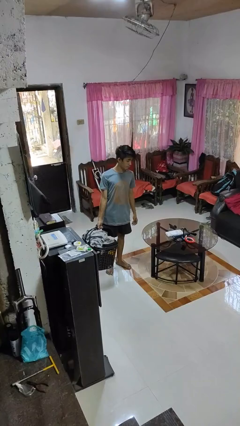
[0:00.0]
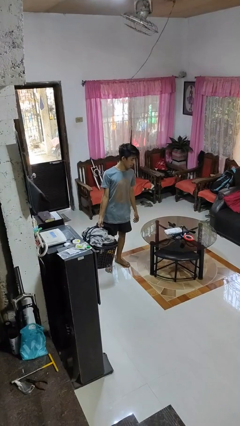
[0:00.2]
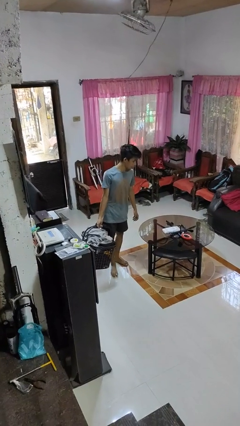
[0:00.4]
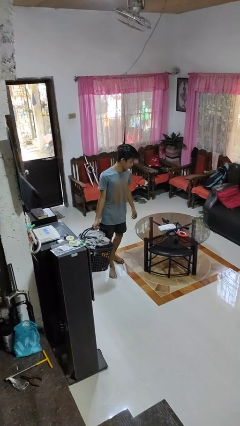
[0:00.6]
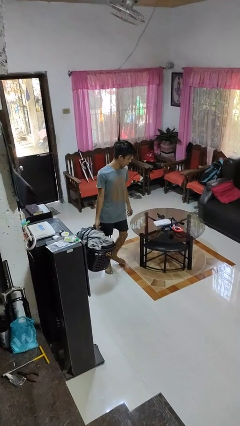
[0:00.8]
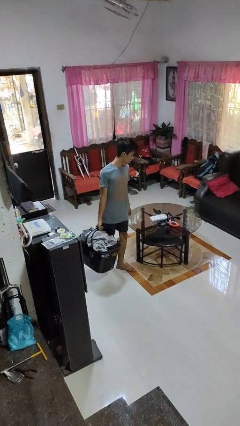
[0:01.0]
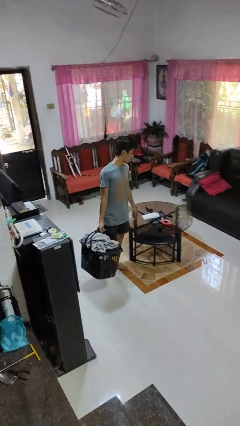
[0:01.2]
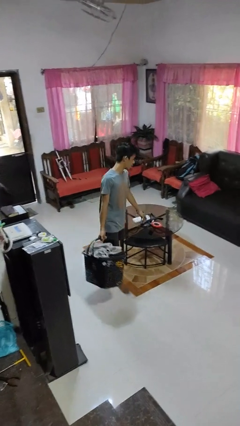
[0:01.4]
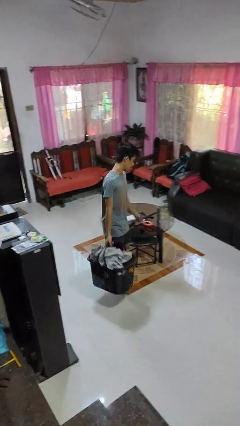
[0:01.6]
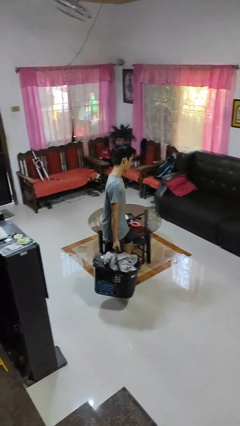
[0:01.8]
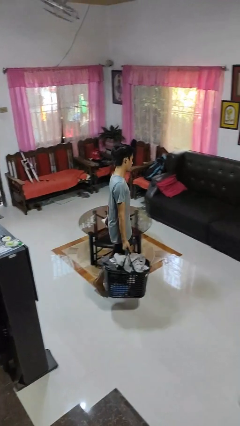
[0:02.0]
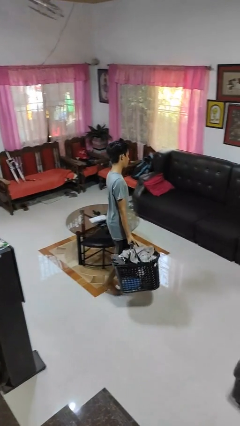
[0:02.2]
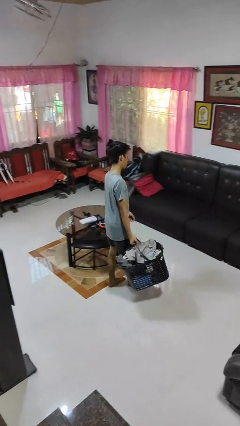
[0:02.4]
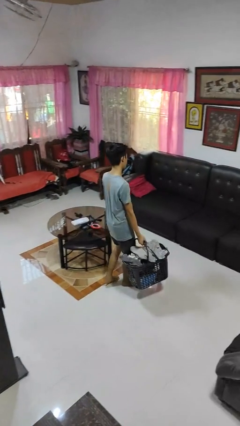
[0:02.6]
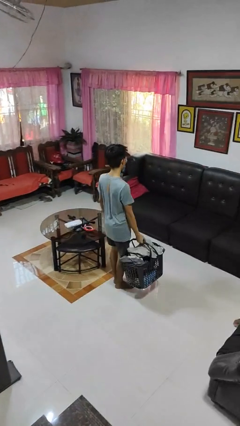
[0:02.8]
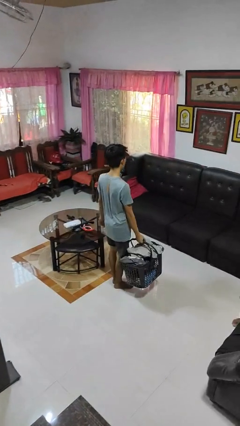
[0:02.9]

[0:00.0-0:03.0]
person carries laundry basket

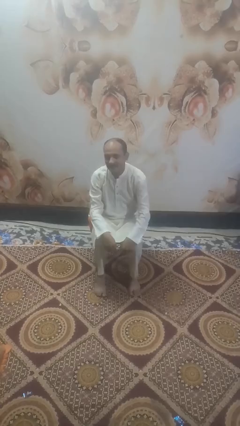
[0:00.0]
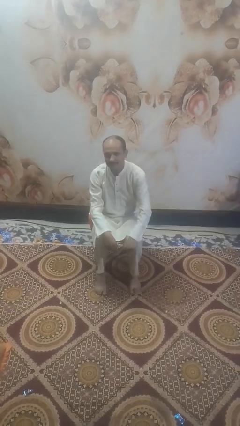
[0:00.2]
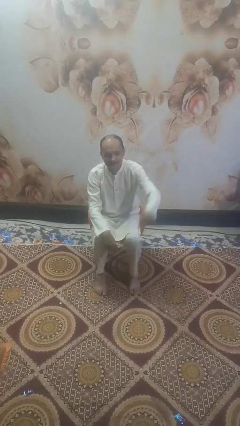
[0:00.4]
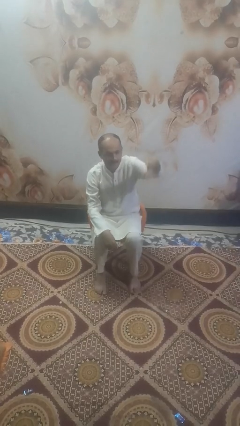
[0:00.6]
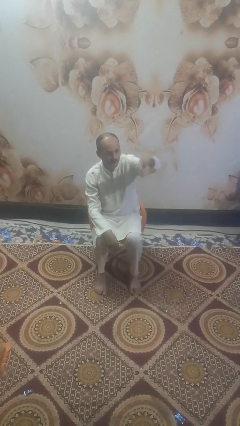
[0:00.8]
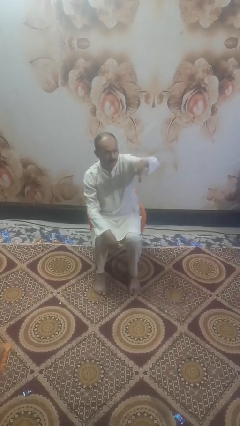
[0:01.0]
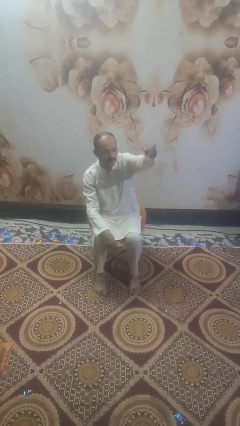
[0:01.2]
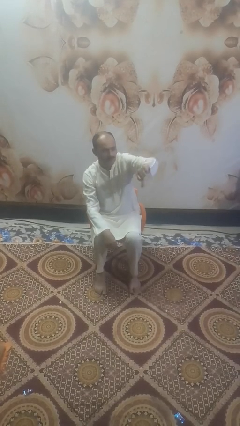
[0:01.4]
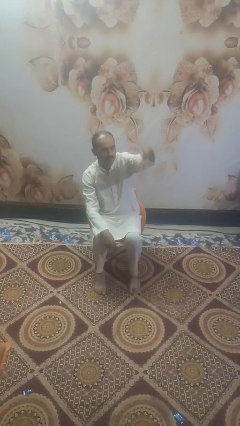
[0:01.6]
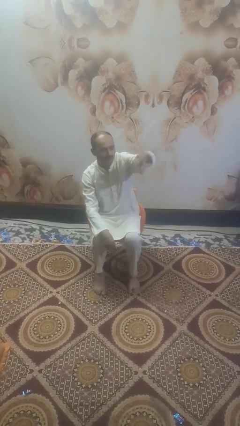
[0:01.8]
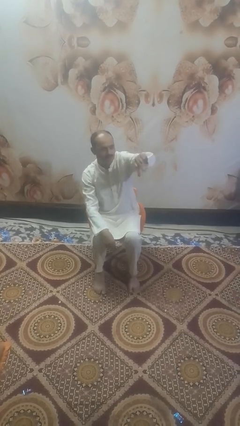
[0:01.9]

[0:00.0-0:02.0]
person gestures thumbs down

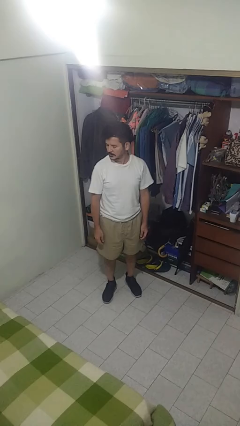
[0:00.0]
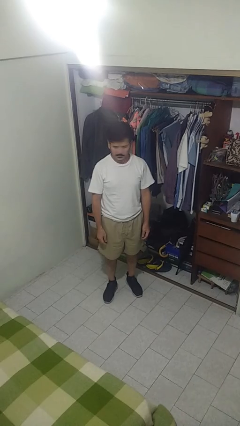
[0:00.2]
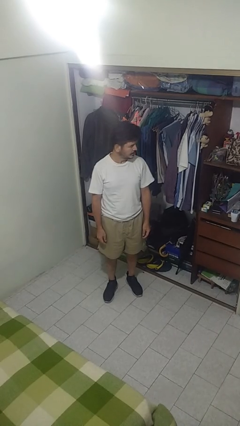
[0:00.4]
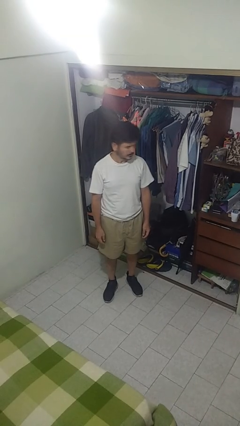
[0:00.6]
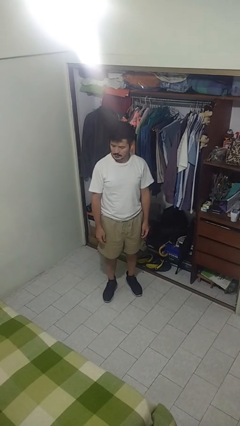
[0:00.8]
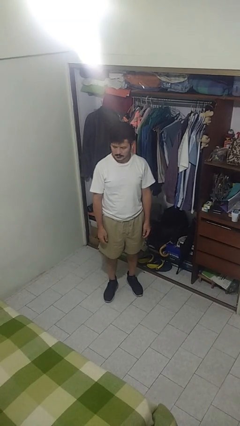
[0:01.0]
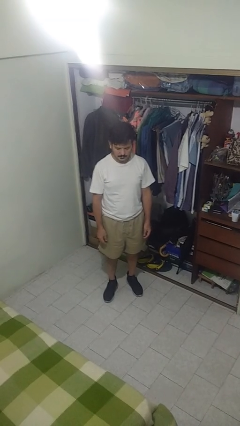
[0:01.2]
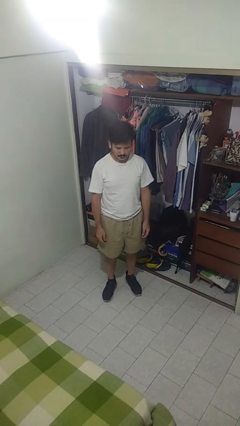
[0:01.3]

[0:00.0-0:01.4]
person shakes head

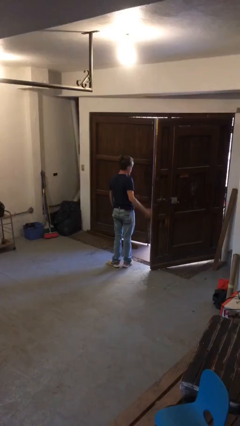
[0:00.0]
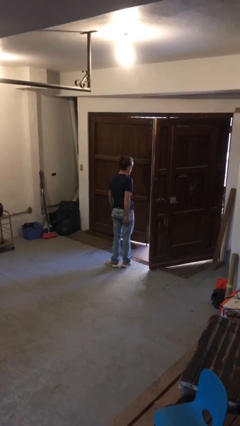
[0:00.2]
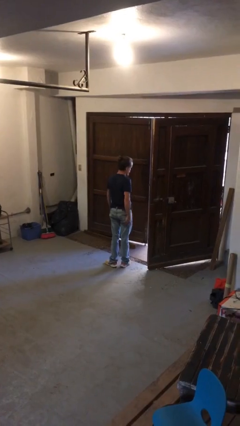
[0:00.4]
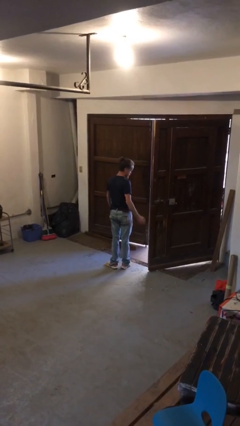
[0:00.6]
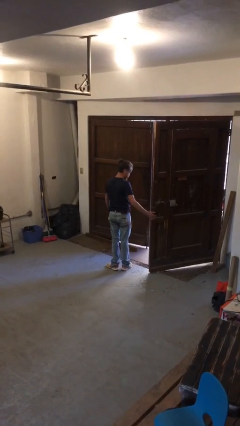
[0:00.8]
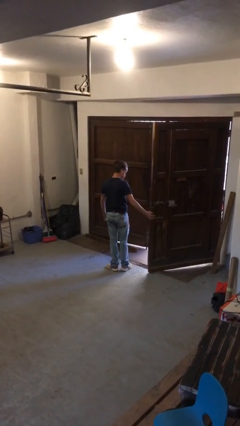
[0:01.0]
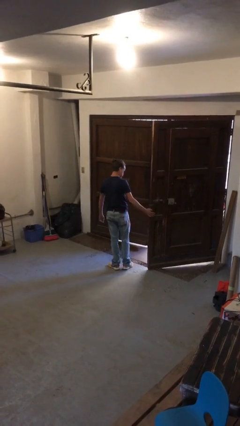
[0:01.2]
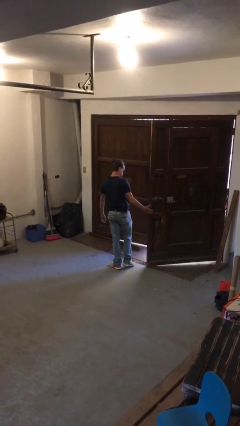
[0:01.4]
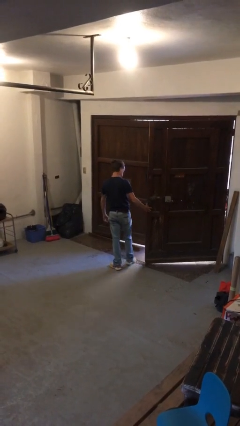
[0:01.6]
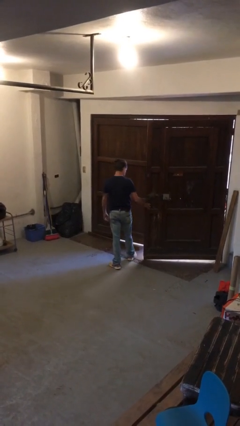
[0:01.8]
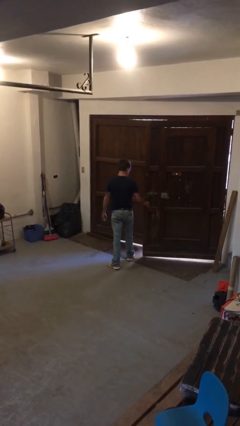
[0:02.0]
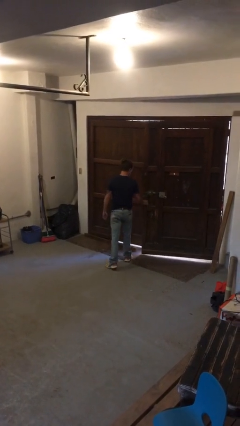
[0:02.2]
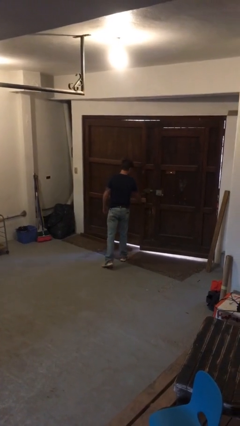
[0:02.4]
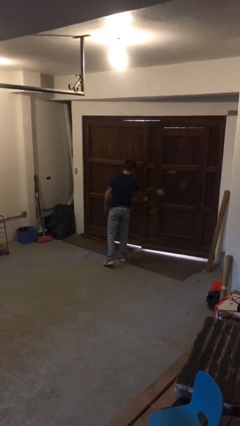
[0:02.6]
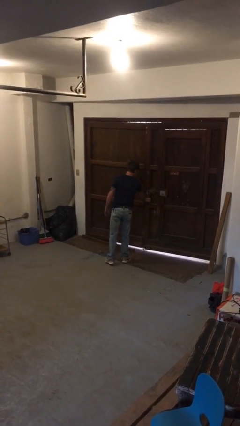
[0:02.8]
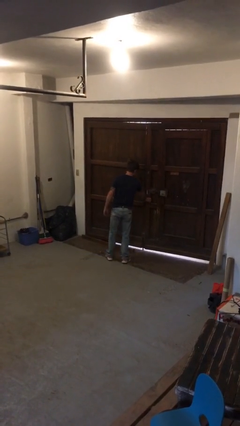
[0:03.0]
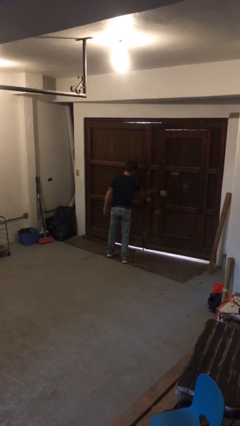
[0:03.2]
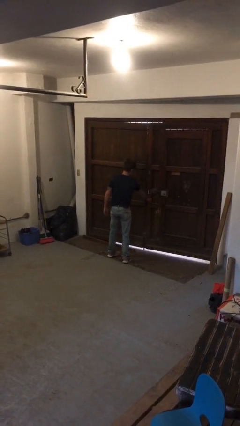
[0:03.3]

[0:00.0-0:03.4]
person closes gate

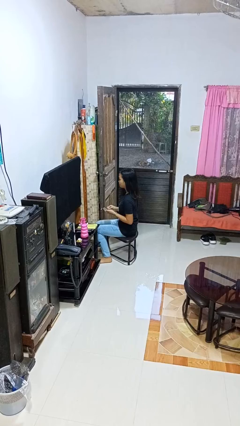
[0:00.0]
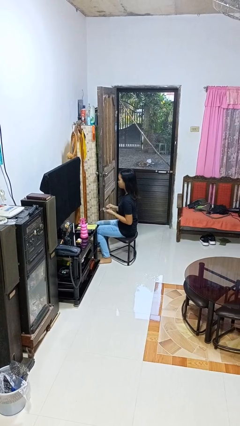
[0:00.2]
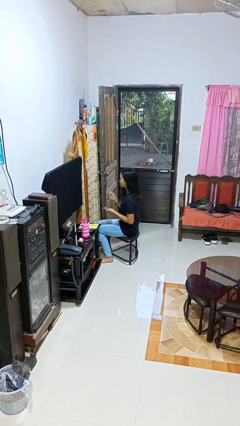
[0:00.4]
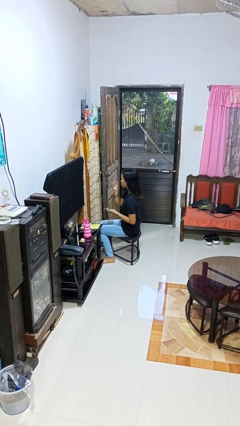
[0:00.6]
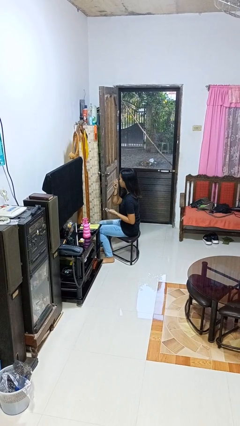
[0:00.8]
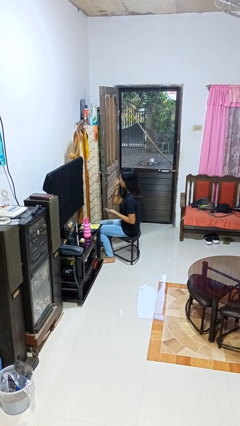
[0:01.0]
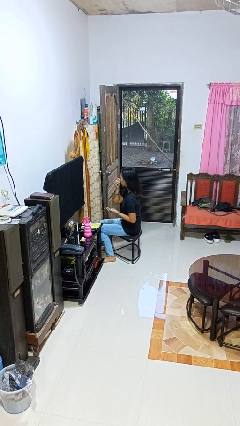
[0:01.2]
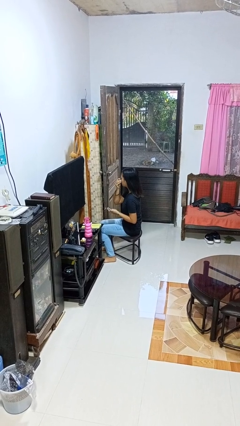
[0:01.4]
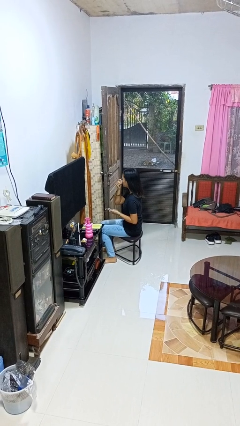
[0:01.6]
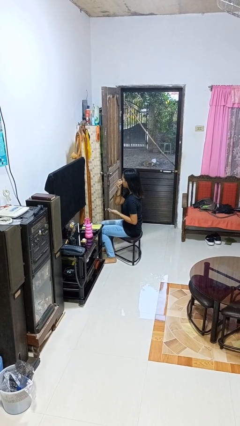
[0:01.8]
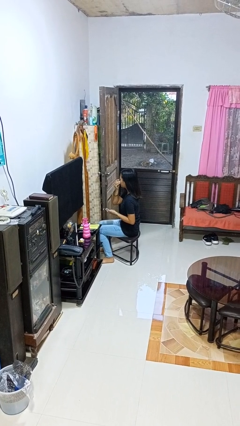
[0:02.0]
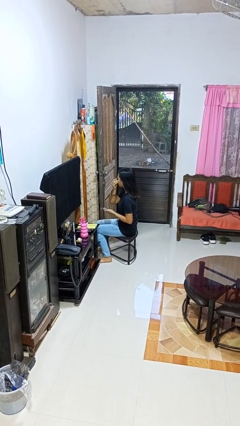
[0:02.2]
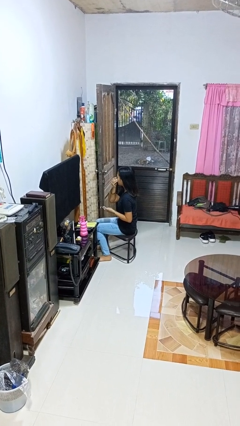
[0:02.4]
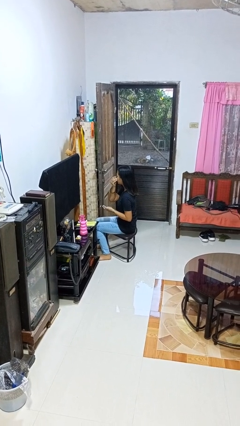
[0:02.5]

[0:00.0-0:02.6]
person applies eye makeup

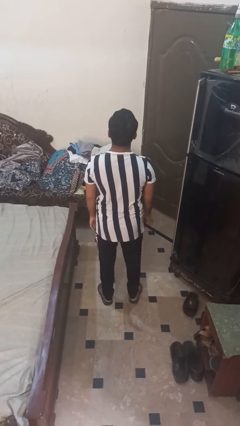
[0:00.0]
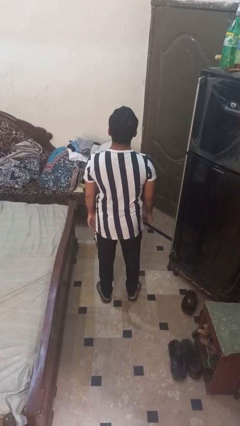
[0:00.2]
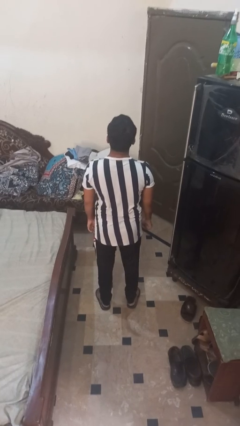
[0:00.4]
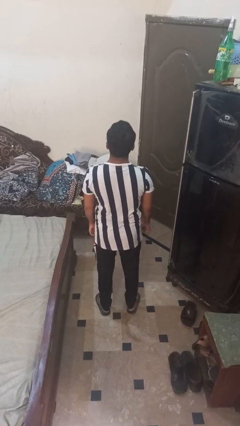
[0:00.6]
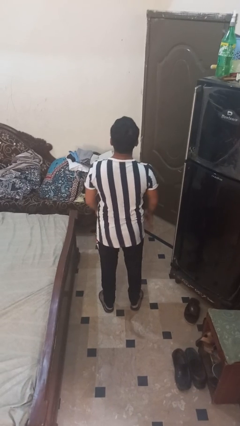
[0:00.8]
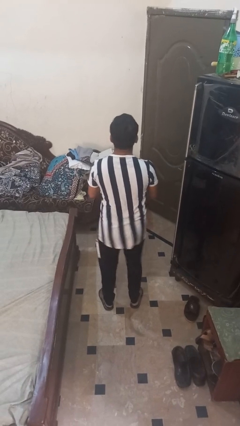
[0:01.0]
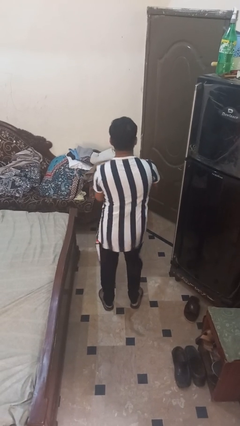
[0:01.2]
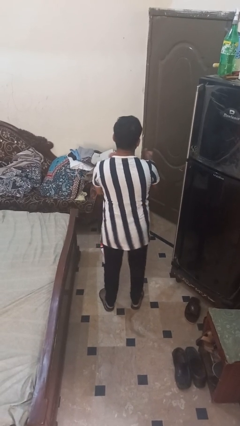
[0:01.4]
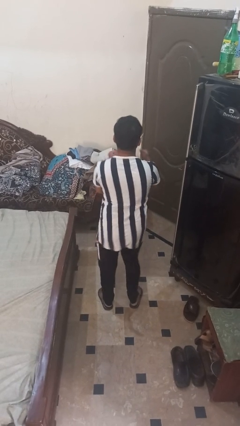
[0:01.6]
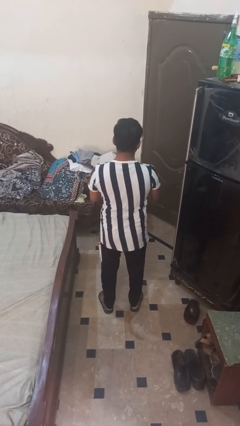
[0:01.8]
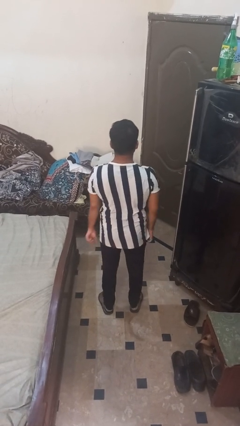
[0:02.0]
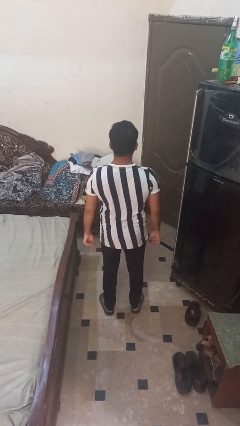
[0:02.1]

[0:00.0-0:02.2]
person wiggles hips

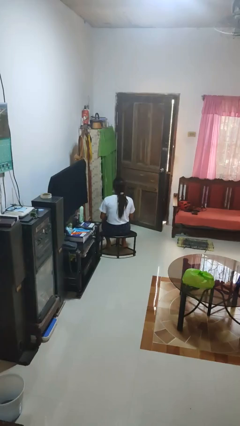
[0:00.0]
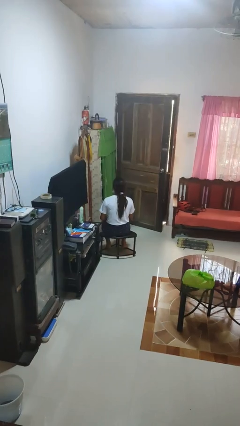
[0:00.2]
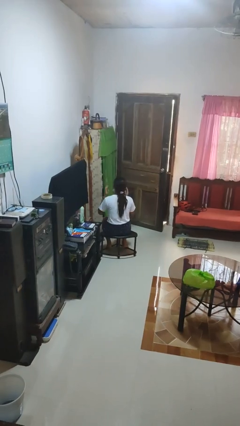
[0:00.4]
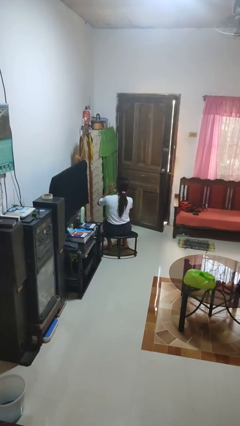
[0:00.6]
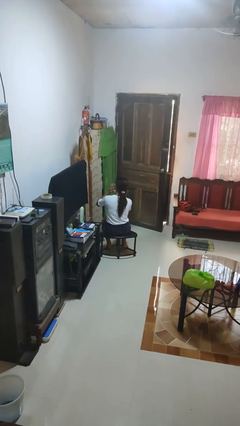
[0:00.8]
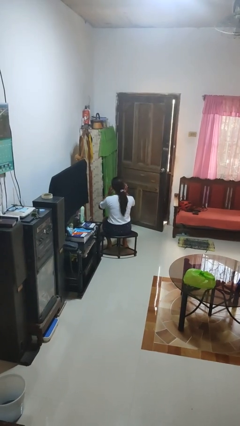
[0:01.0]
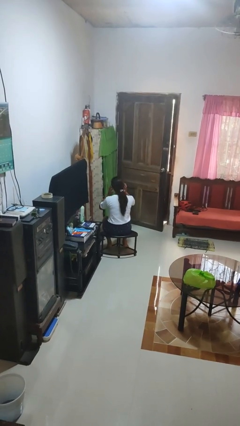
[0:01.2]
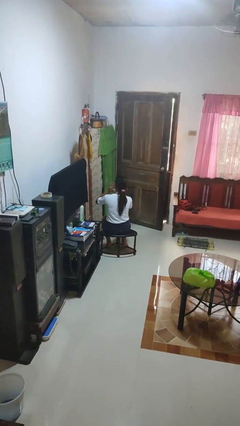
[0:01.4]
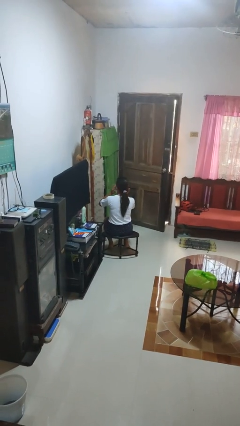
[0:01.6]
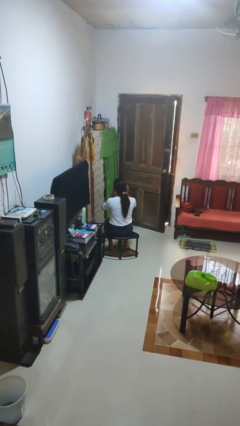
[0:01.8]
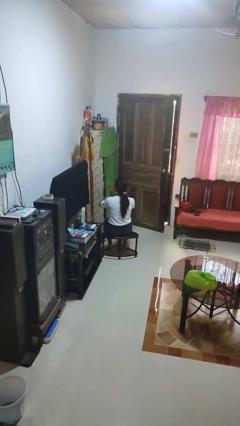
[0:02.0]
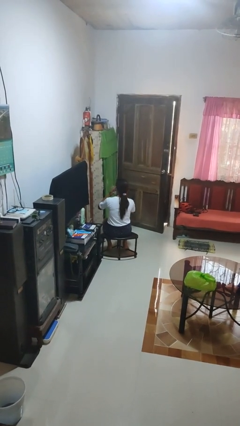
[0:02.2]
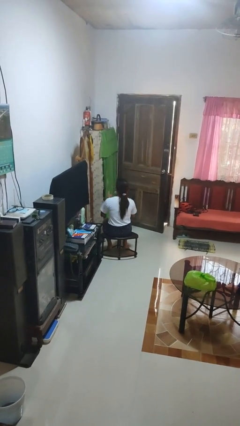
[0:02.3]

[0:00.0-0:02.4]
person puts fingers in ear
